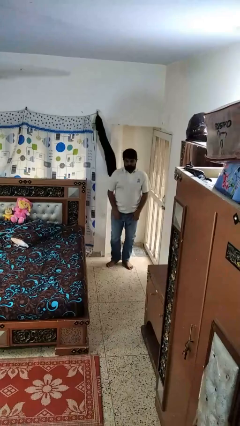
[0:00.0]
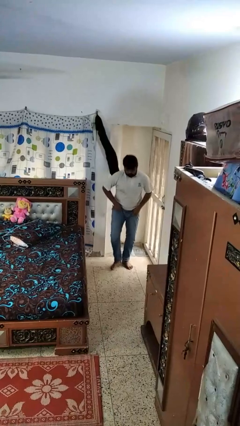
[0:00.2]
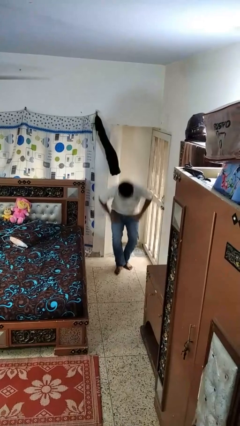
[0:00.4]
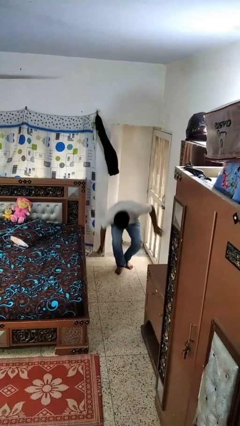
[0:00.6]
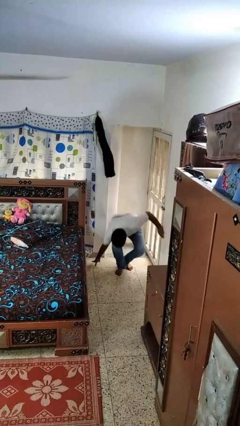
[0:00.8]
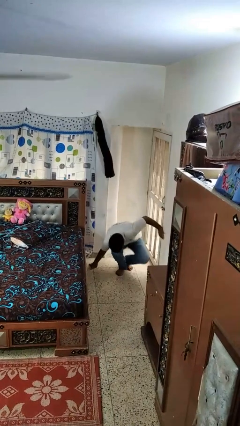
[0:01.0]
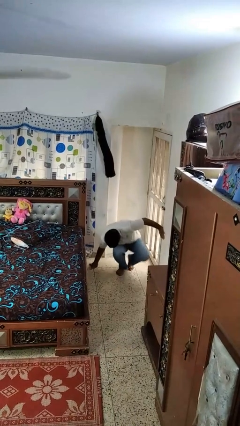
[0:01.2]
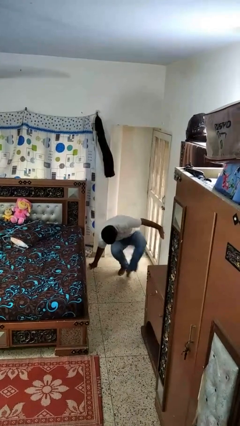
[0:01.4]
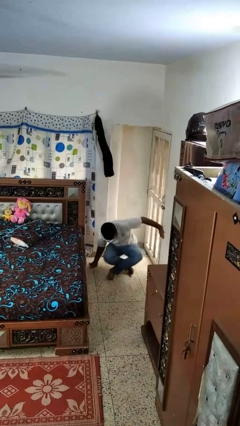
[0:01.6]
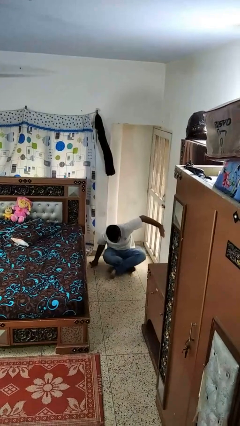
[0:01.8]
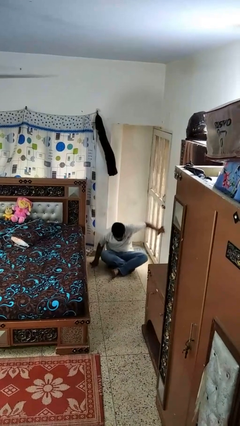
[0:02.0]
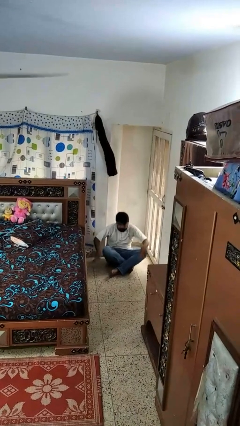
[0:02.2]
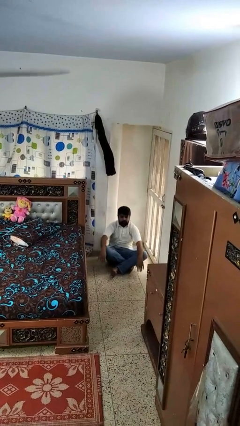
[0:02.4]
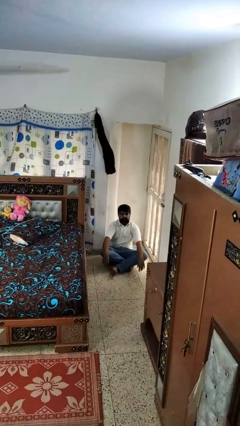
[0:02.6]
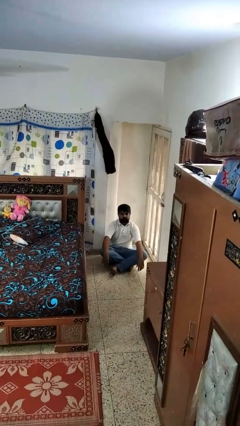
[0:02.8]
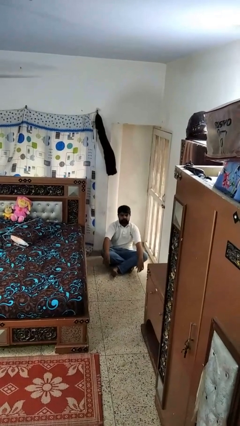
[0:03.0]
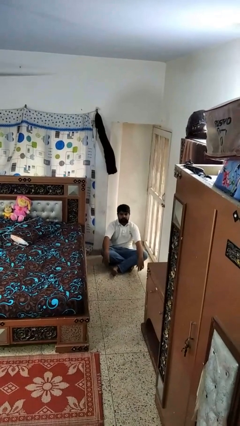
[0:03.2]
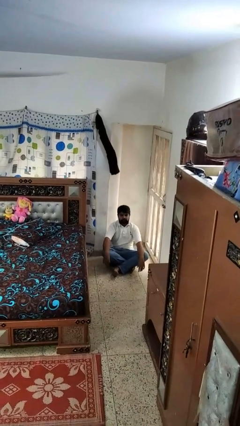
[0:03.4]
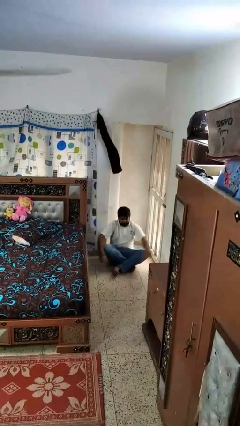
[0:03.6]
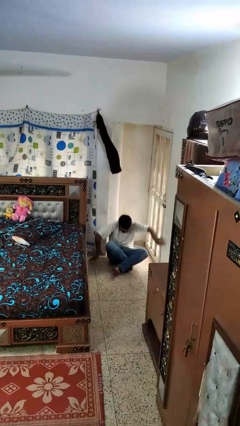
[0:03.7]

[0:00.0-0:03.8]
person sits crisscross

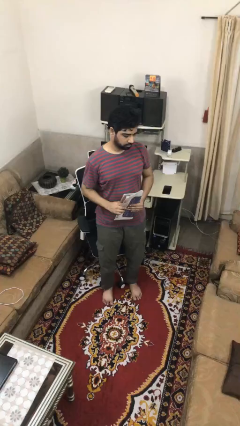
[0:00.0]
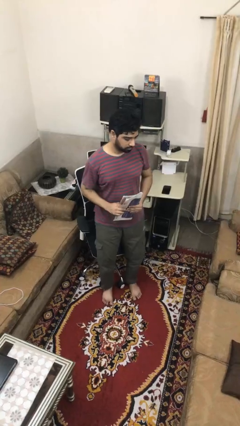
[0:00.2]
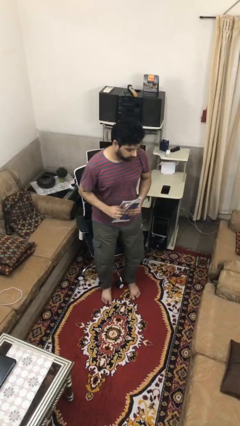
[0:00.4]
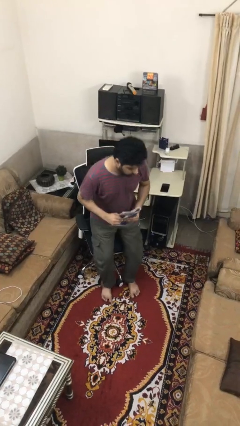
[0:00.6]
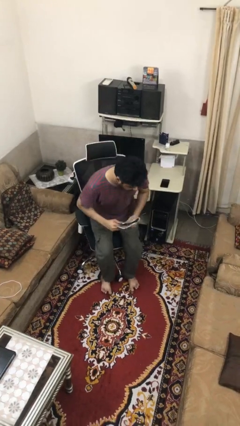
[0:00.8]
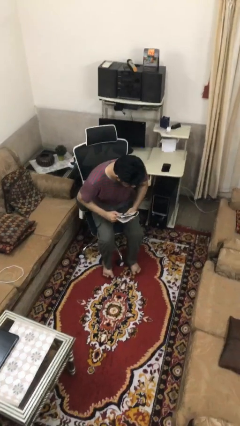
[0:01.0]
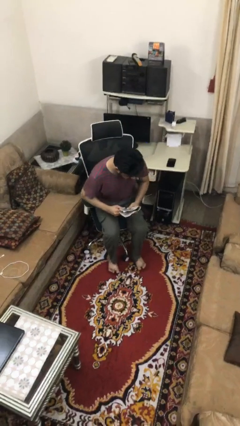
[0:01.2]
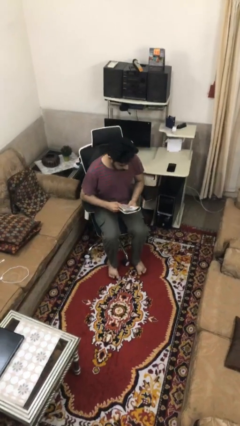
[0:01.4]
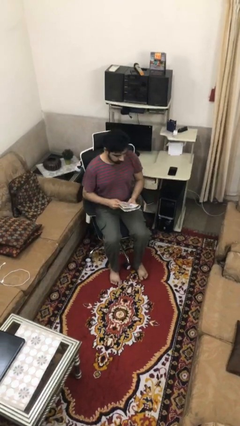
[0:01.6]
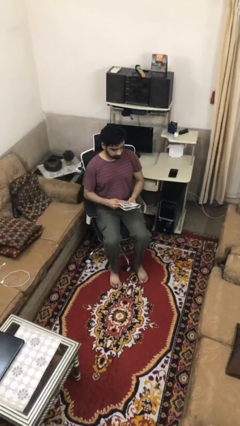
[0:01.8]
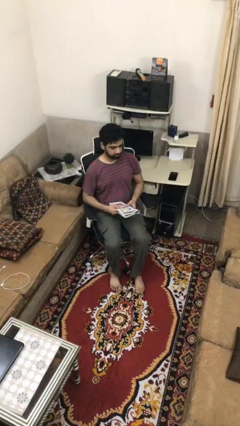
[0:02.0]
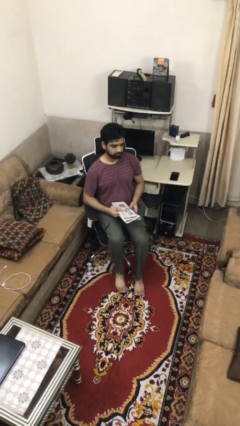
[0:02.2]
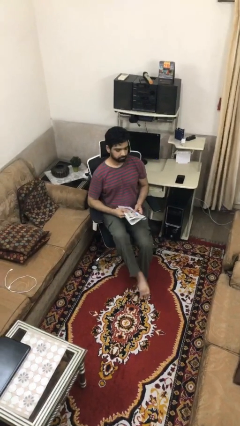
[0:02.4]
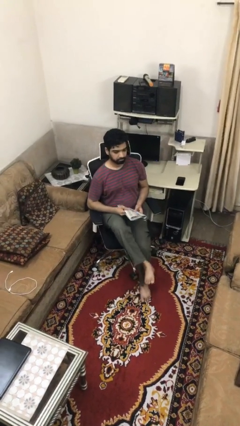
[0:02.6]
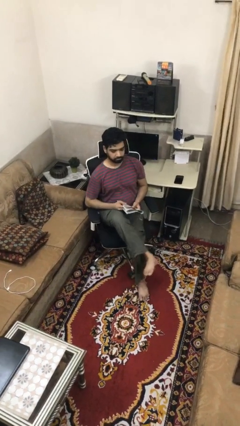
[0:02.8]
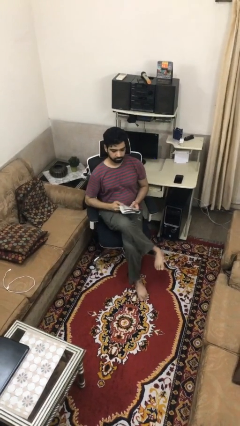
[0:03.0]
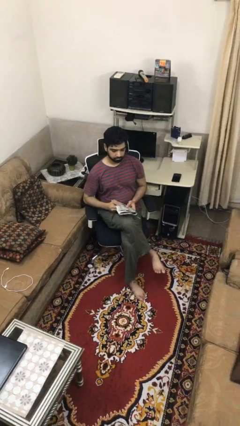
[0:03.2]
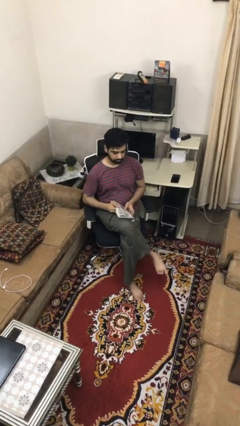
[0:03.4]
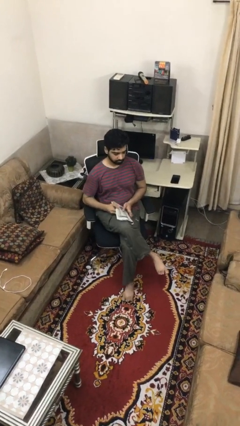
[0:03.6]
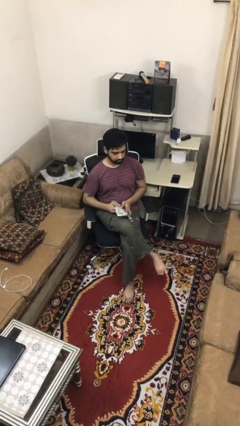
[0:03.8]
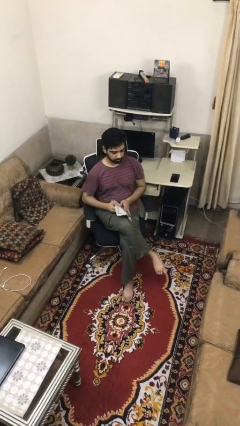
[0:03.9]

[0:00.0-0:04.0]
person sits down

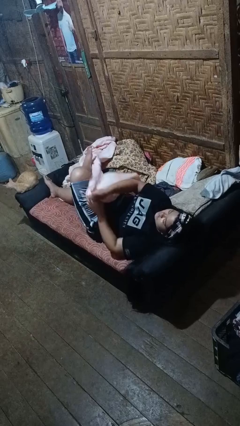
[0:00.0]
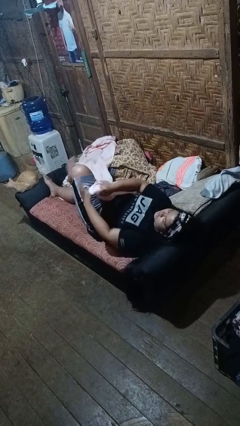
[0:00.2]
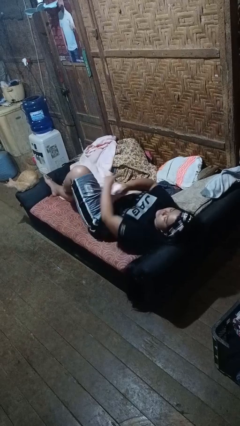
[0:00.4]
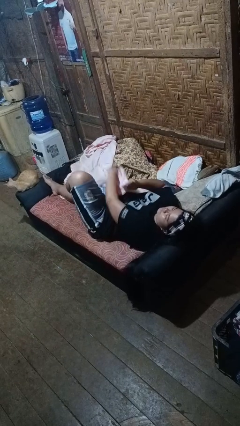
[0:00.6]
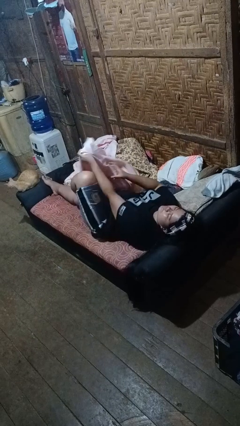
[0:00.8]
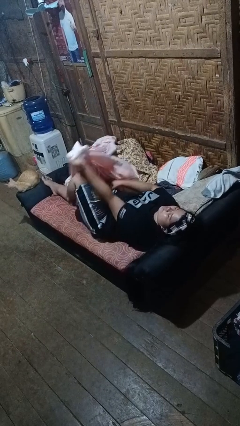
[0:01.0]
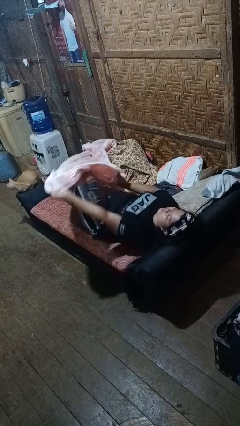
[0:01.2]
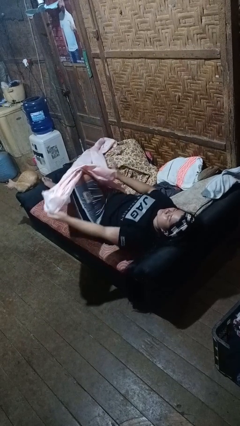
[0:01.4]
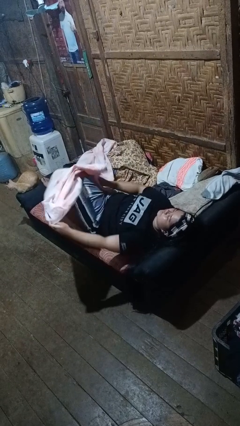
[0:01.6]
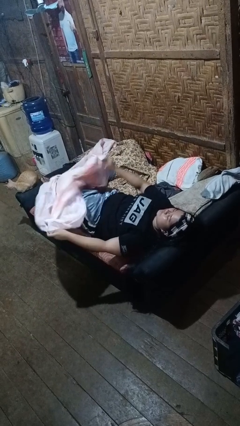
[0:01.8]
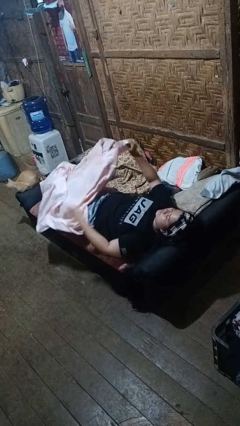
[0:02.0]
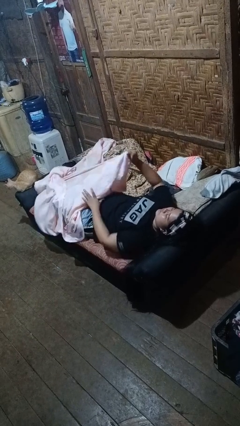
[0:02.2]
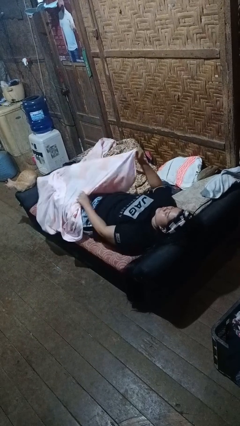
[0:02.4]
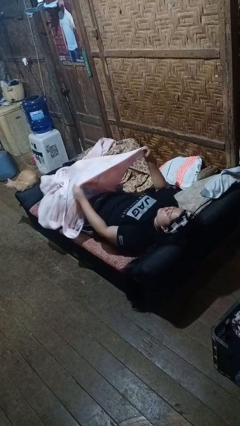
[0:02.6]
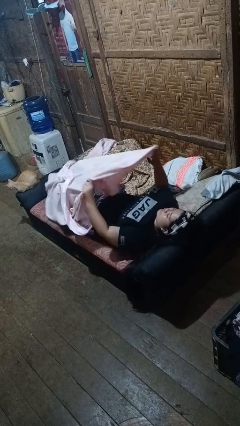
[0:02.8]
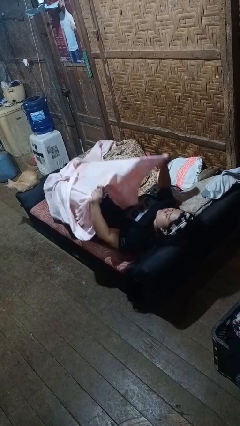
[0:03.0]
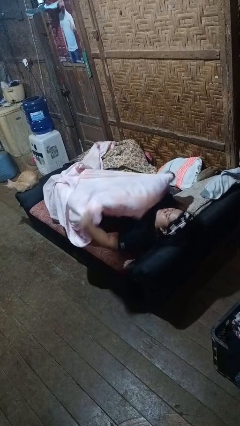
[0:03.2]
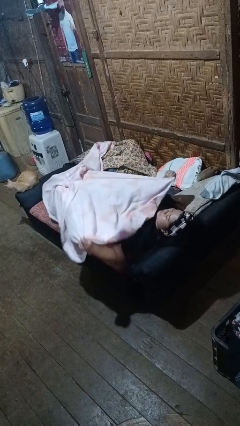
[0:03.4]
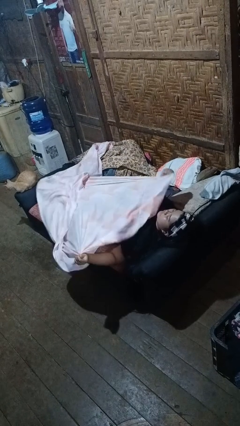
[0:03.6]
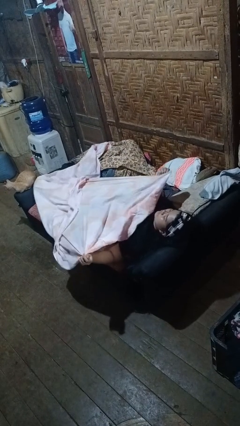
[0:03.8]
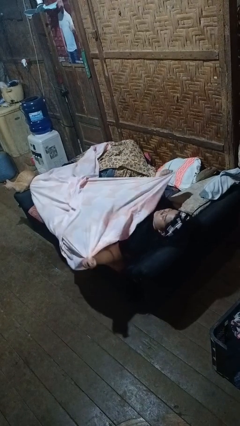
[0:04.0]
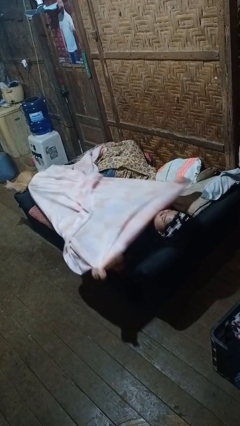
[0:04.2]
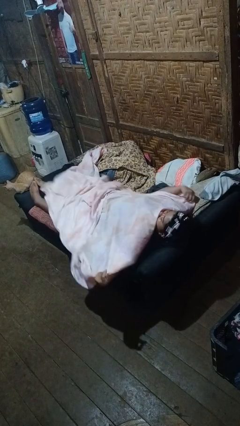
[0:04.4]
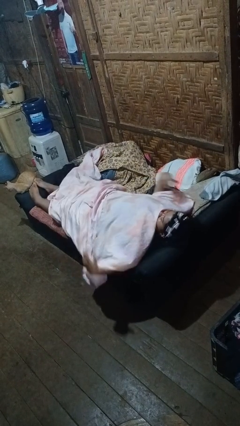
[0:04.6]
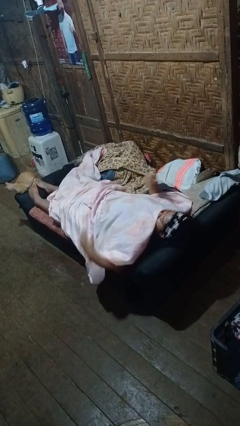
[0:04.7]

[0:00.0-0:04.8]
person covers with bedsheets

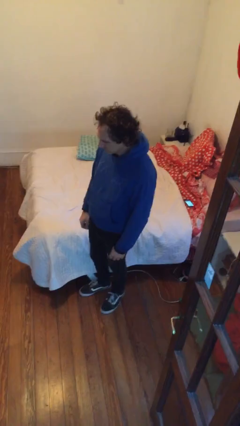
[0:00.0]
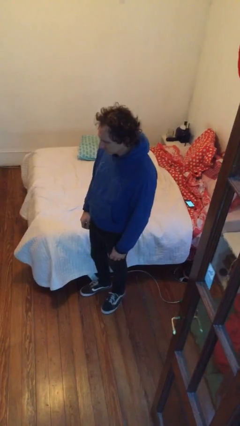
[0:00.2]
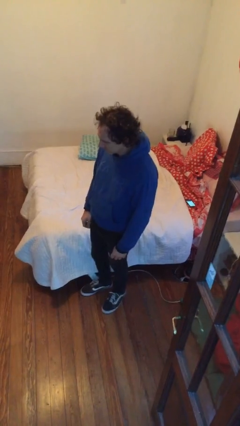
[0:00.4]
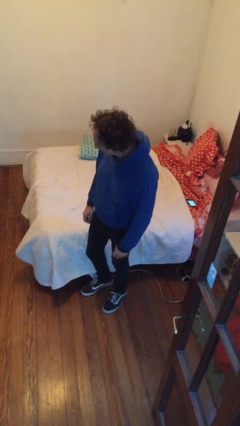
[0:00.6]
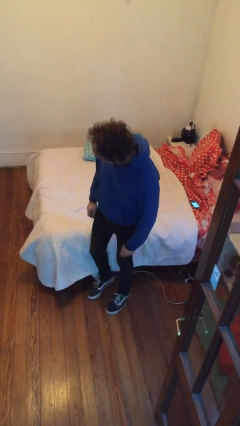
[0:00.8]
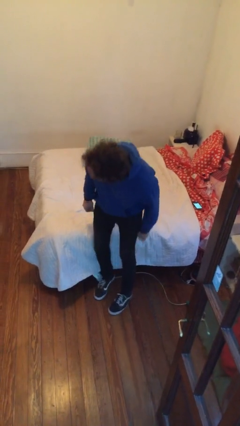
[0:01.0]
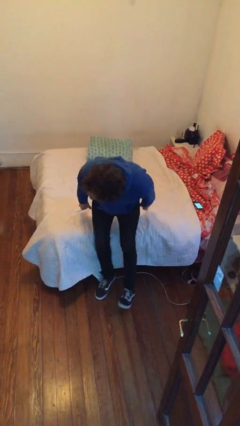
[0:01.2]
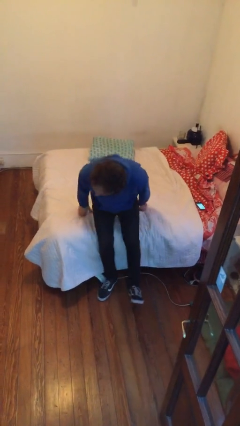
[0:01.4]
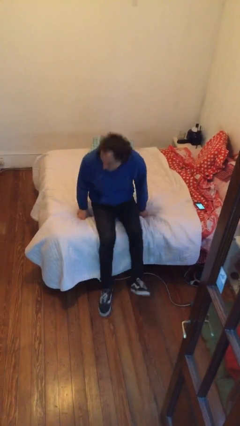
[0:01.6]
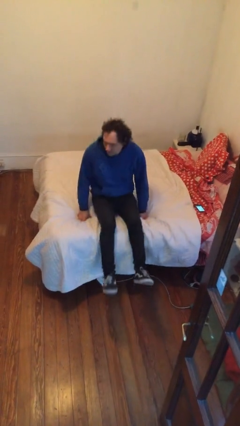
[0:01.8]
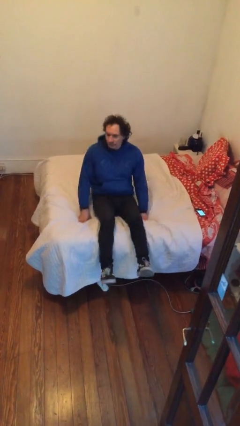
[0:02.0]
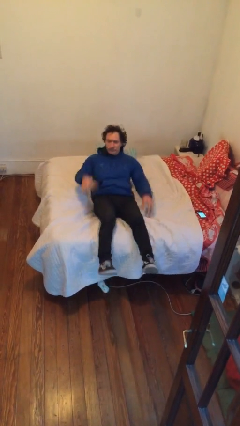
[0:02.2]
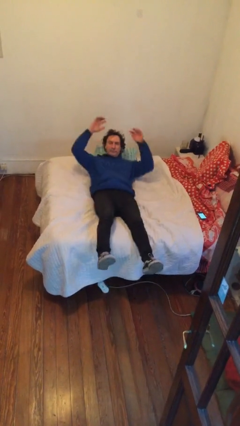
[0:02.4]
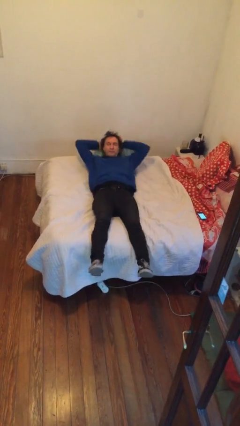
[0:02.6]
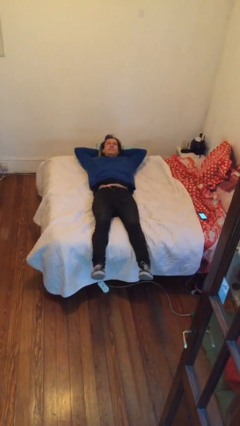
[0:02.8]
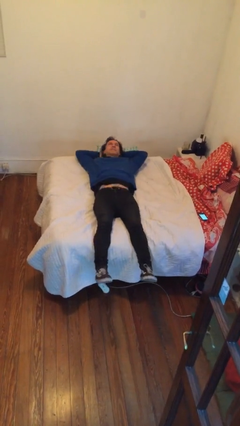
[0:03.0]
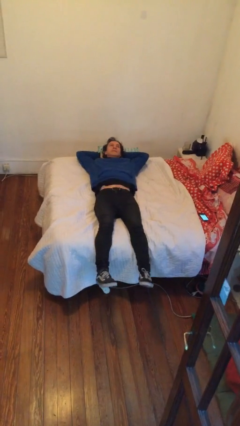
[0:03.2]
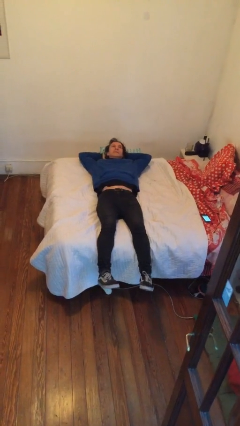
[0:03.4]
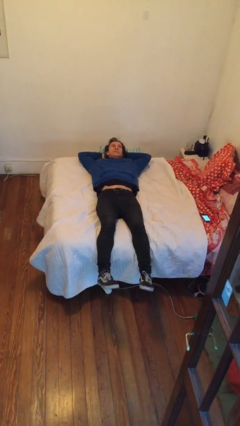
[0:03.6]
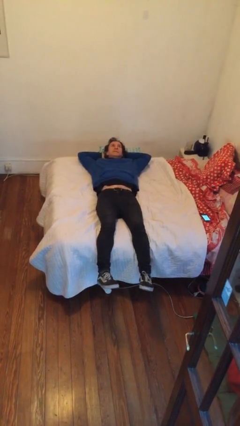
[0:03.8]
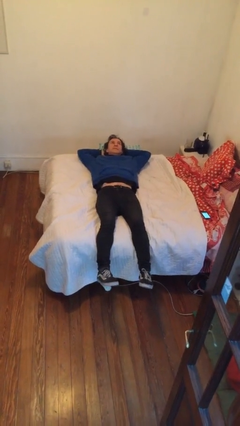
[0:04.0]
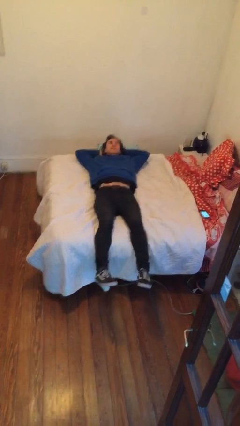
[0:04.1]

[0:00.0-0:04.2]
person lies down on bed

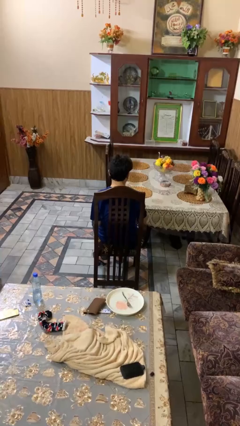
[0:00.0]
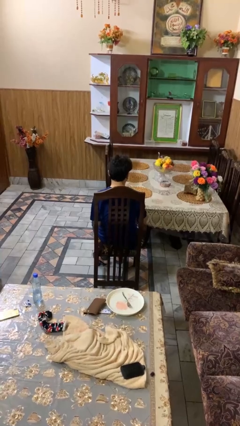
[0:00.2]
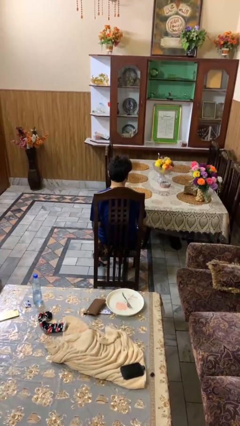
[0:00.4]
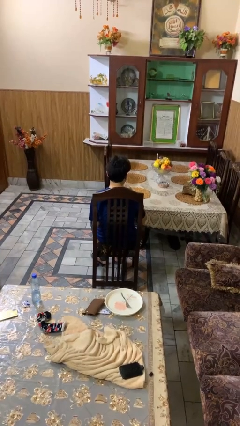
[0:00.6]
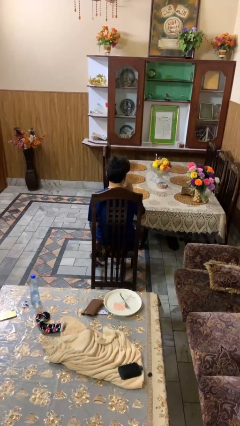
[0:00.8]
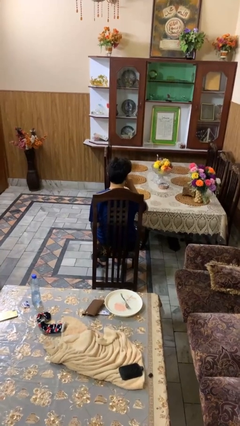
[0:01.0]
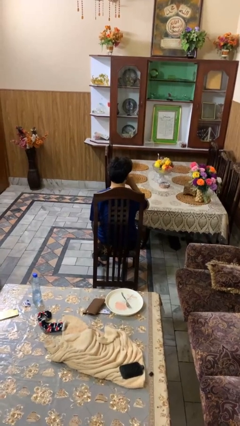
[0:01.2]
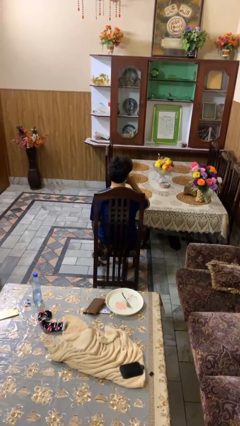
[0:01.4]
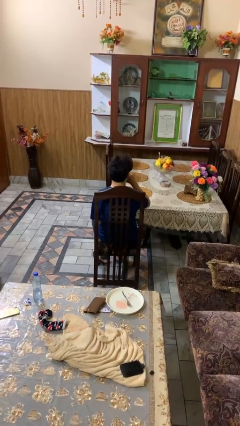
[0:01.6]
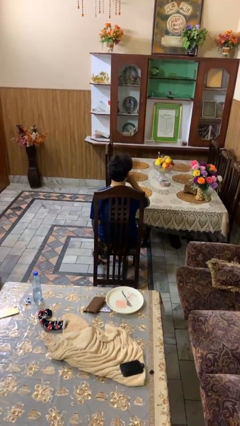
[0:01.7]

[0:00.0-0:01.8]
person drinks from shotglass
